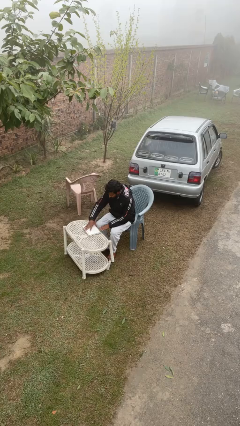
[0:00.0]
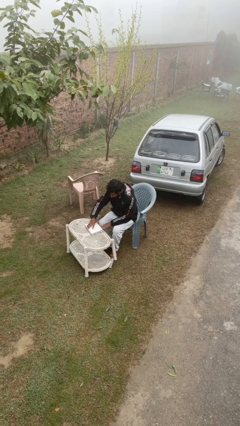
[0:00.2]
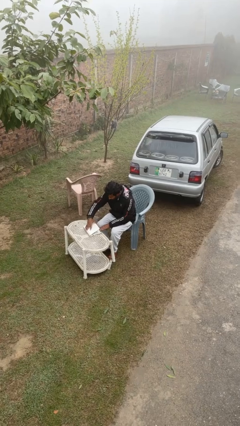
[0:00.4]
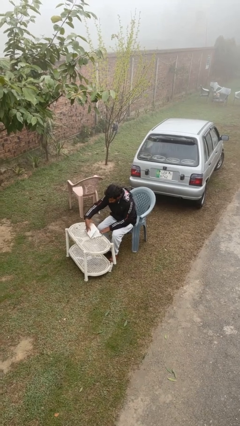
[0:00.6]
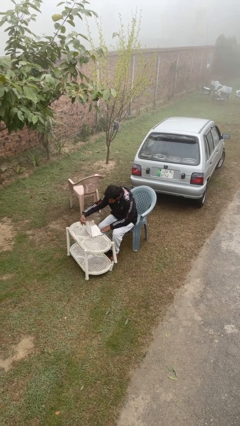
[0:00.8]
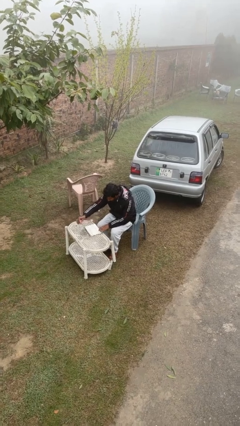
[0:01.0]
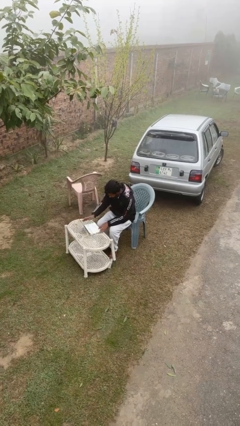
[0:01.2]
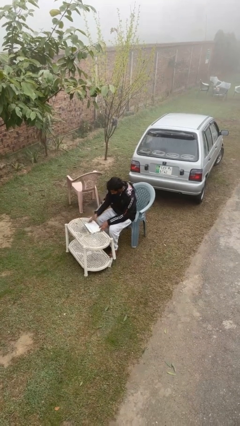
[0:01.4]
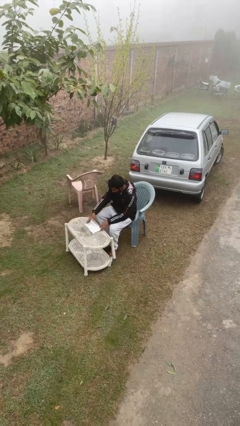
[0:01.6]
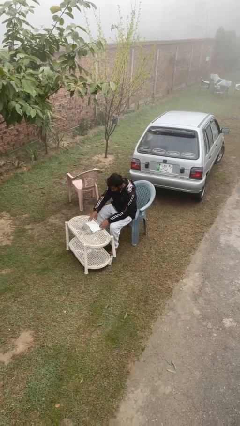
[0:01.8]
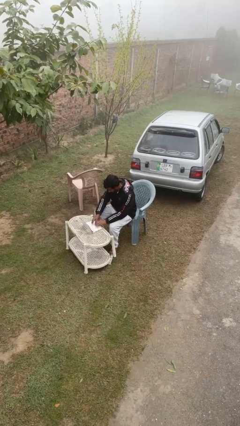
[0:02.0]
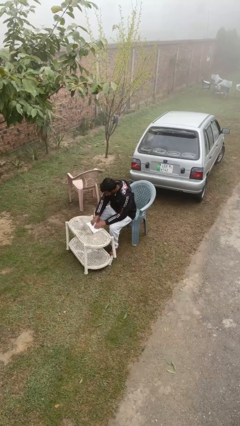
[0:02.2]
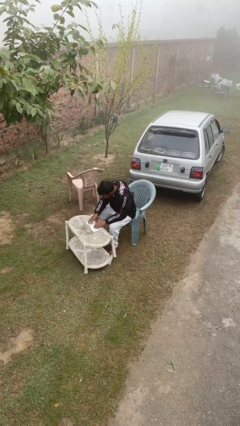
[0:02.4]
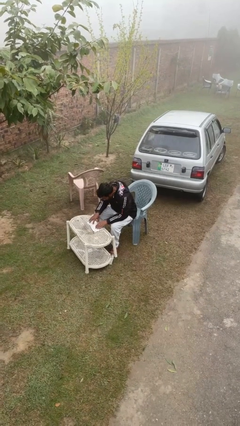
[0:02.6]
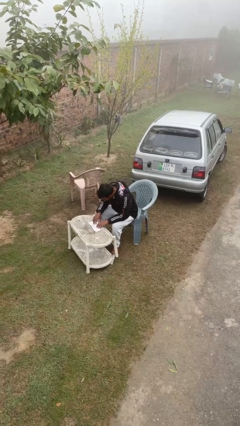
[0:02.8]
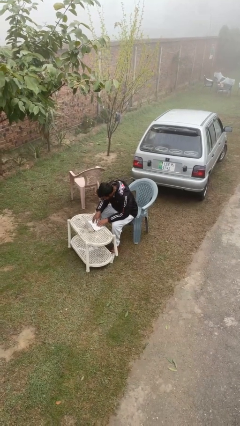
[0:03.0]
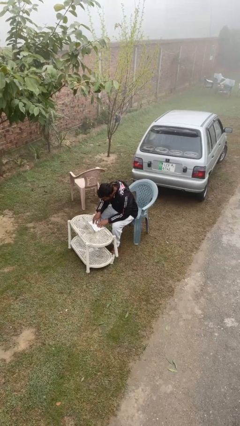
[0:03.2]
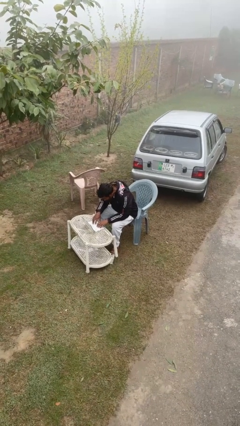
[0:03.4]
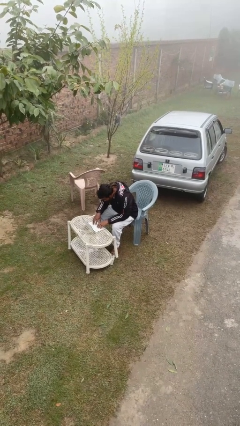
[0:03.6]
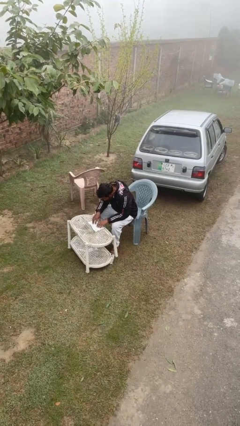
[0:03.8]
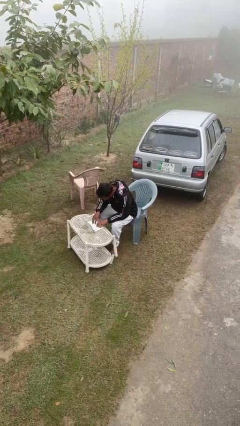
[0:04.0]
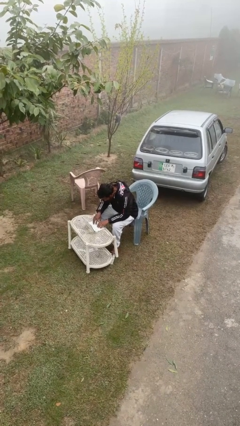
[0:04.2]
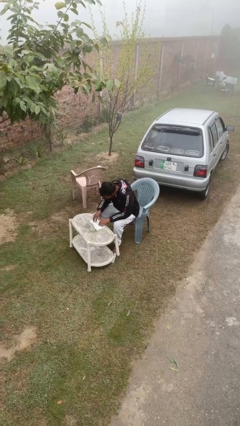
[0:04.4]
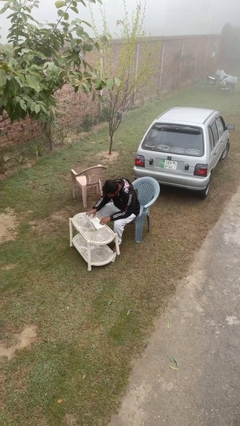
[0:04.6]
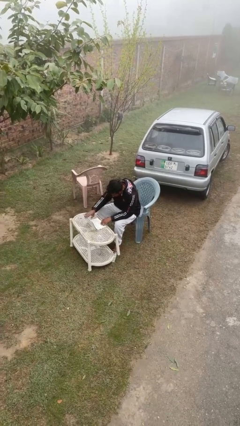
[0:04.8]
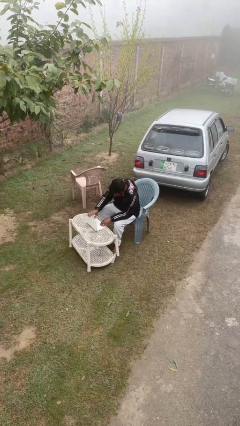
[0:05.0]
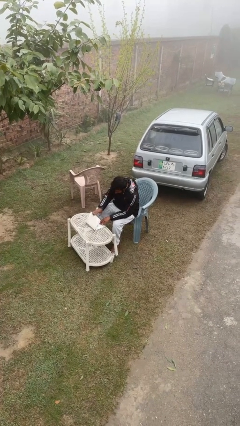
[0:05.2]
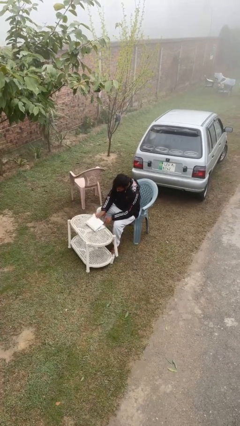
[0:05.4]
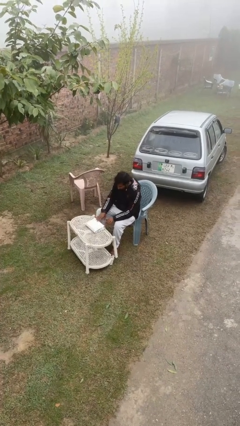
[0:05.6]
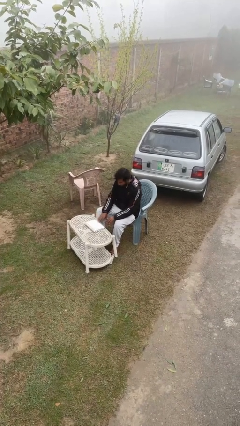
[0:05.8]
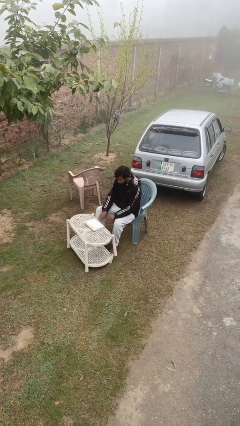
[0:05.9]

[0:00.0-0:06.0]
person interacts with laptop

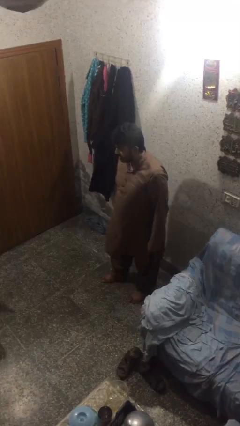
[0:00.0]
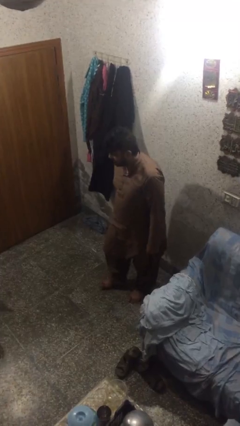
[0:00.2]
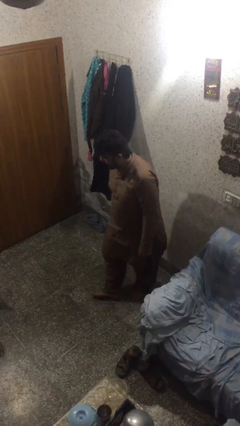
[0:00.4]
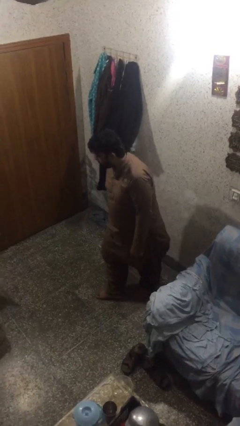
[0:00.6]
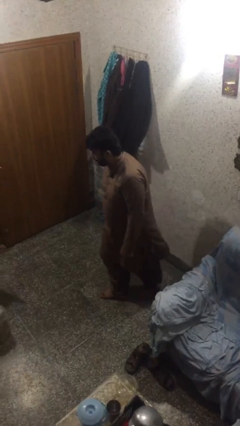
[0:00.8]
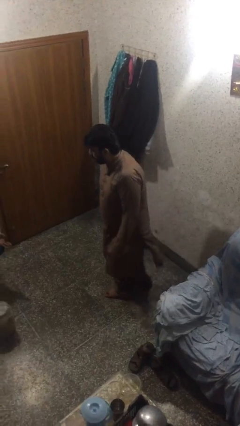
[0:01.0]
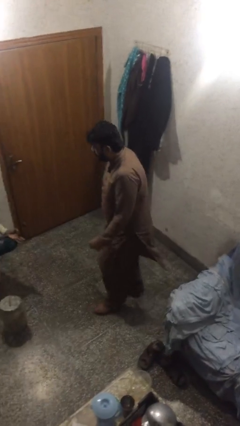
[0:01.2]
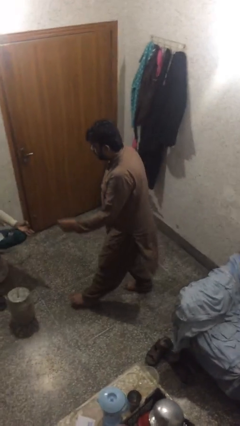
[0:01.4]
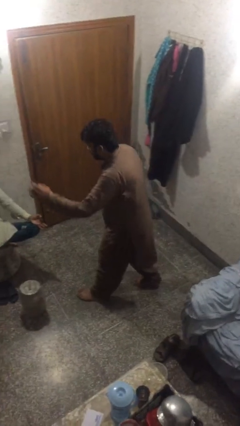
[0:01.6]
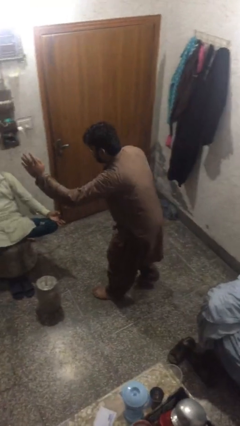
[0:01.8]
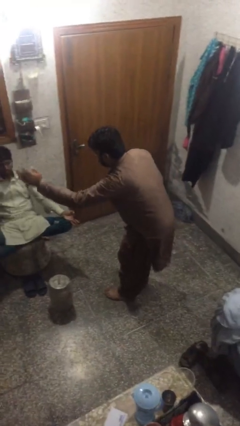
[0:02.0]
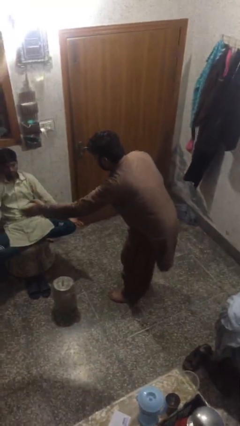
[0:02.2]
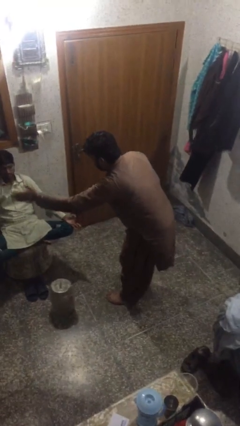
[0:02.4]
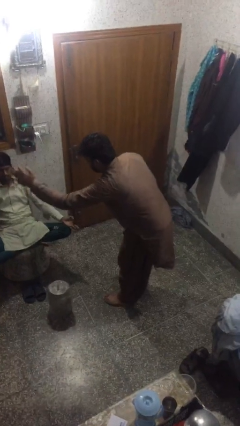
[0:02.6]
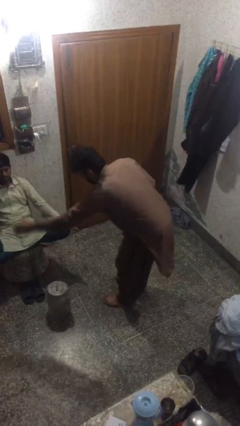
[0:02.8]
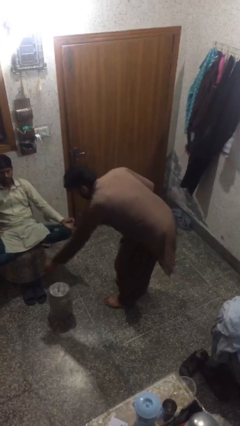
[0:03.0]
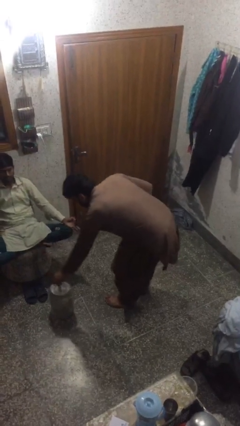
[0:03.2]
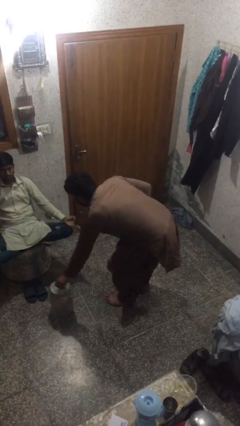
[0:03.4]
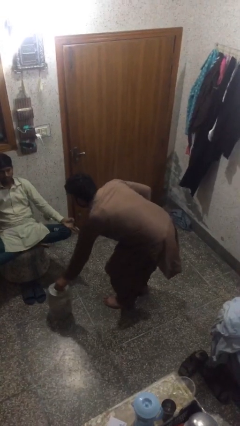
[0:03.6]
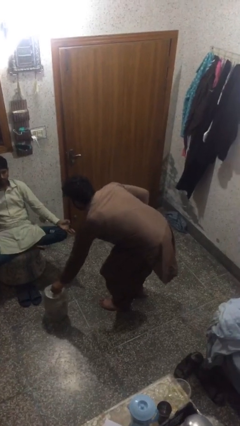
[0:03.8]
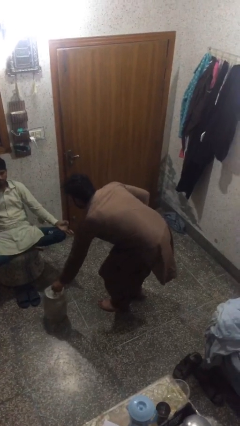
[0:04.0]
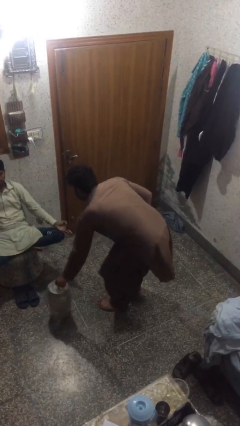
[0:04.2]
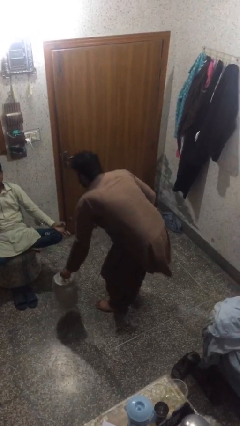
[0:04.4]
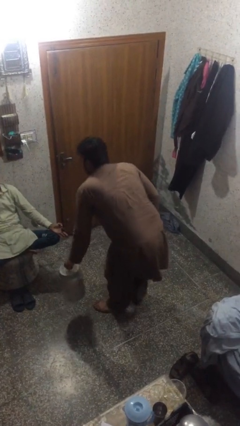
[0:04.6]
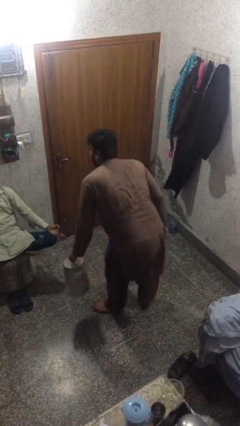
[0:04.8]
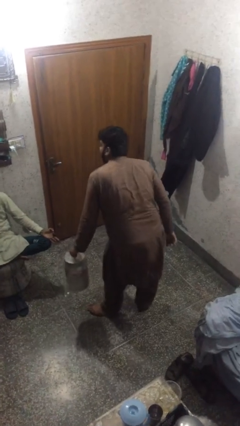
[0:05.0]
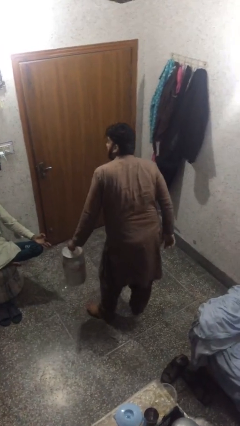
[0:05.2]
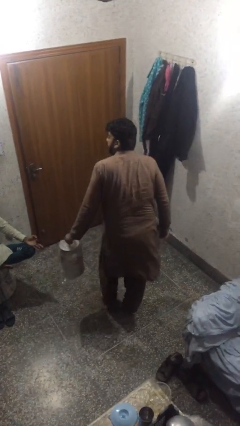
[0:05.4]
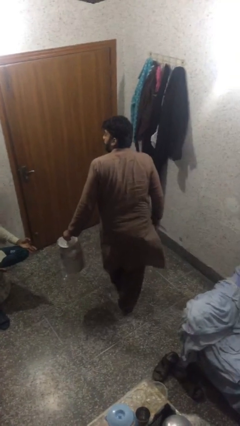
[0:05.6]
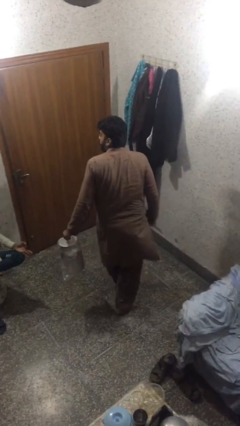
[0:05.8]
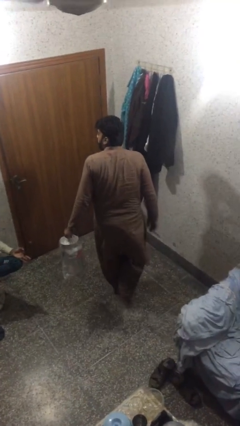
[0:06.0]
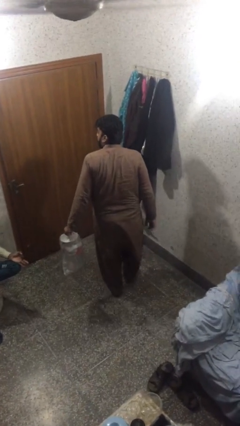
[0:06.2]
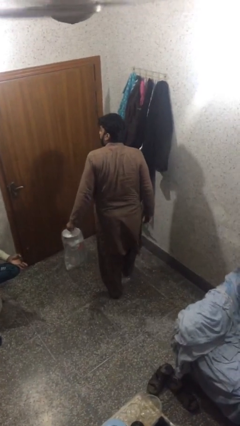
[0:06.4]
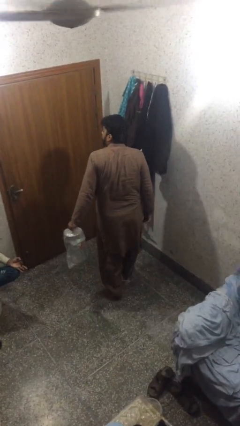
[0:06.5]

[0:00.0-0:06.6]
person steals object from person

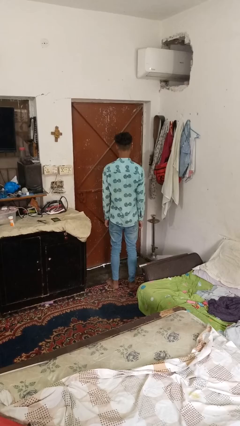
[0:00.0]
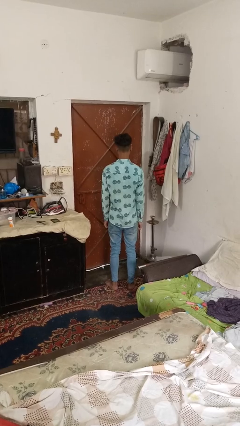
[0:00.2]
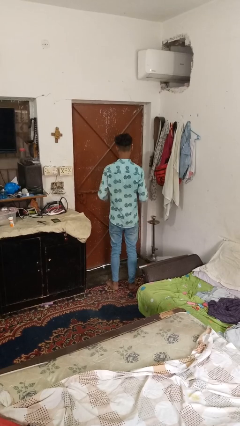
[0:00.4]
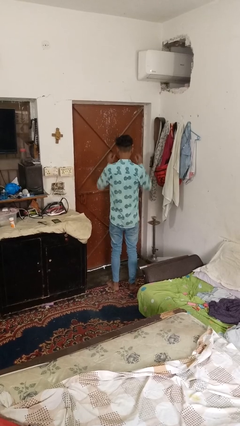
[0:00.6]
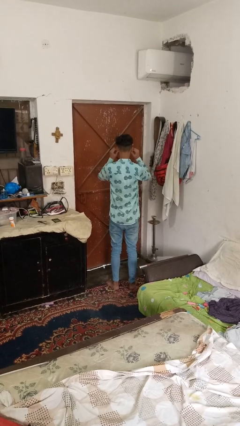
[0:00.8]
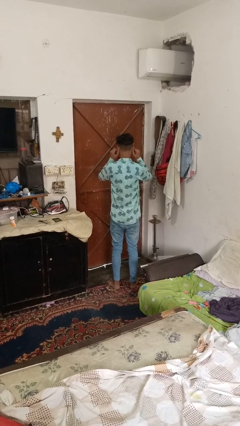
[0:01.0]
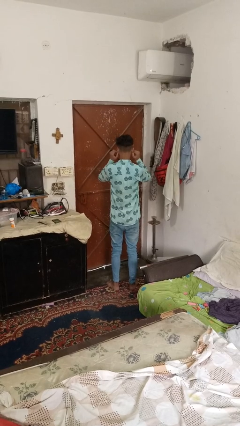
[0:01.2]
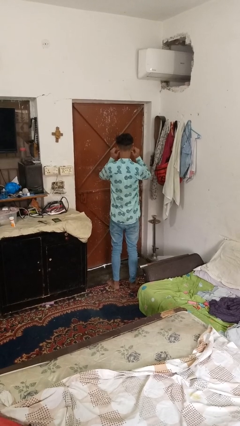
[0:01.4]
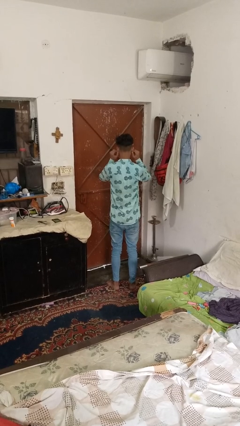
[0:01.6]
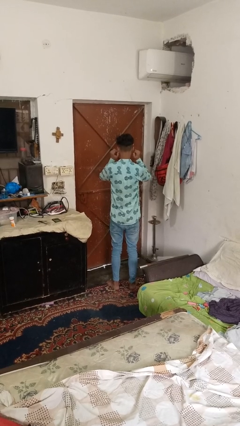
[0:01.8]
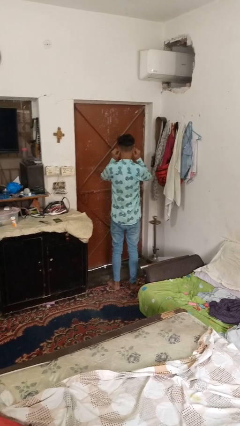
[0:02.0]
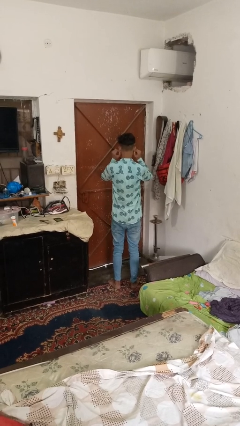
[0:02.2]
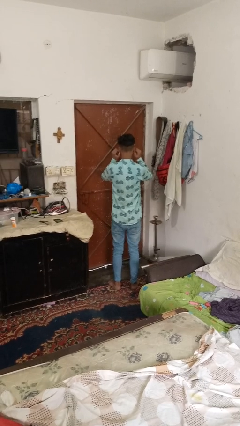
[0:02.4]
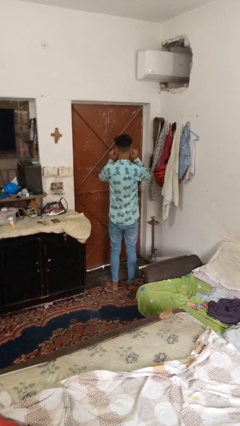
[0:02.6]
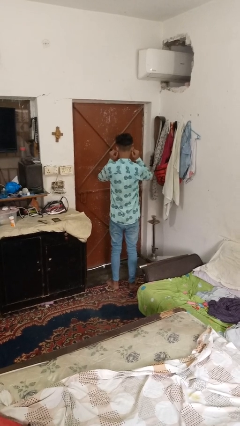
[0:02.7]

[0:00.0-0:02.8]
person touches earlobe

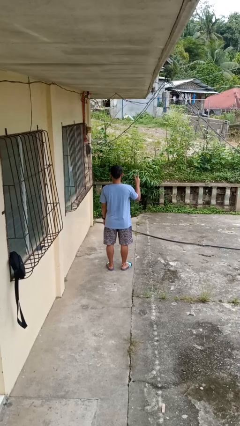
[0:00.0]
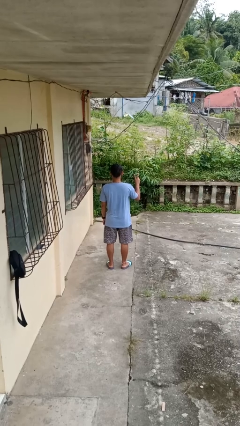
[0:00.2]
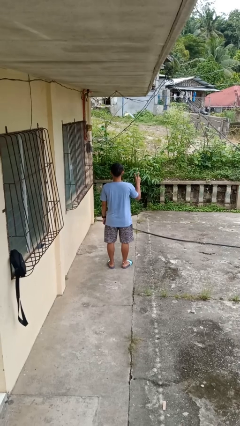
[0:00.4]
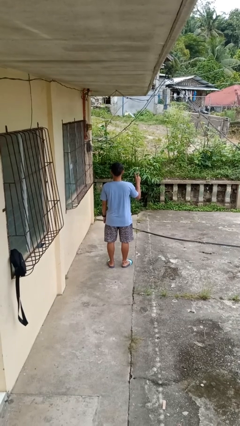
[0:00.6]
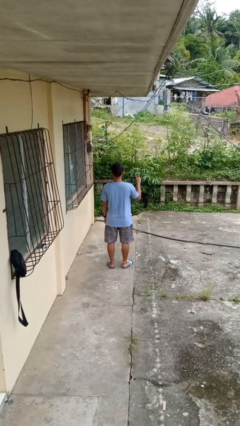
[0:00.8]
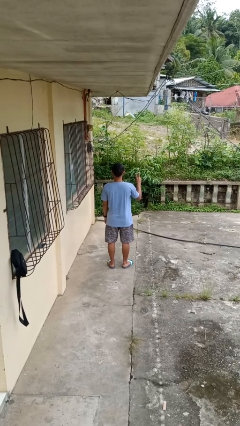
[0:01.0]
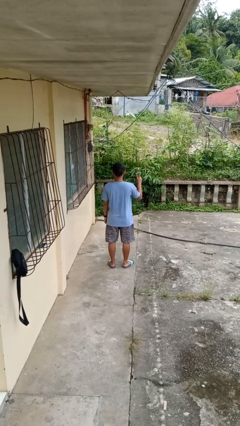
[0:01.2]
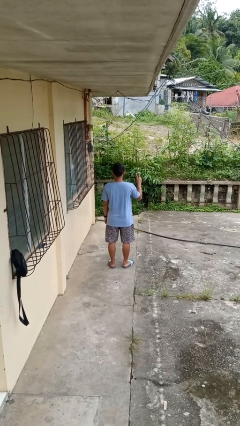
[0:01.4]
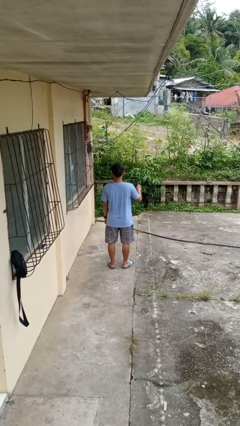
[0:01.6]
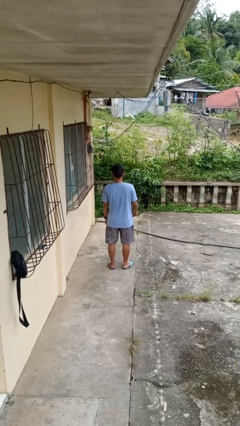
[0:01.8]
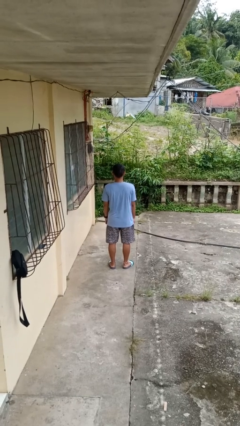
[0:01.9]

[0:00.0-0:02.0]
person gestures peace

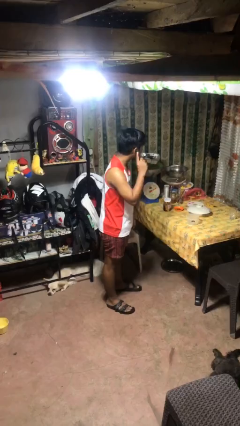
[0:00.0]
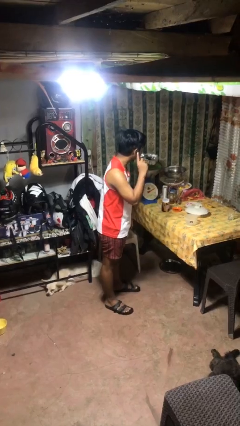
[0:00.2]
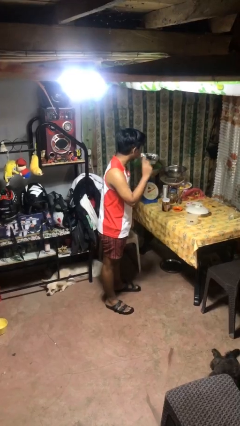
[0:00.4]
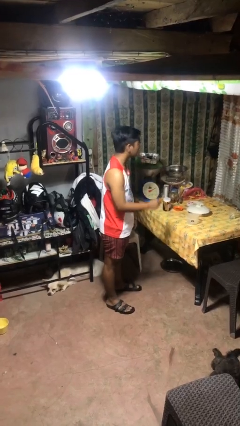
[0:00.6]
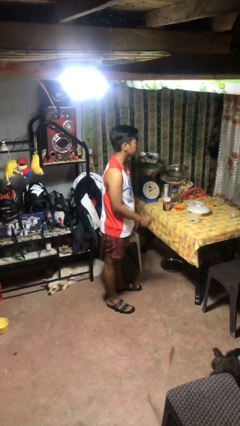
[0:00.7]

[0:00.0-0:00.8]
person gestures listen closely
